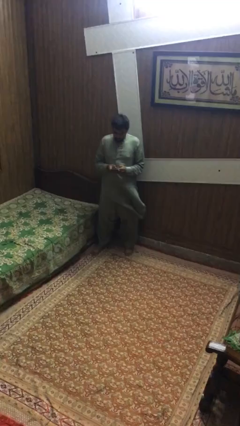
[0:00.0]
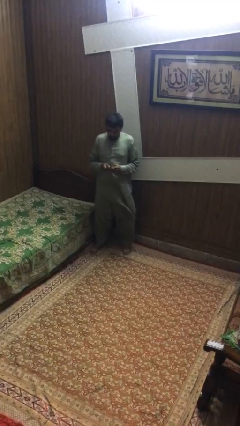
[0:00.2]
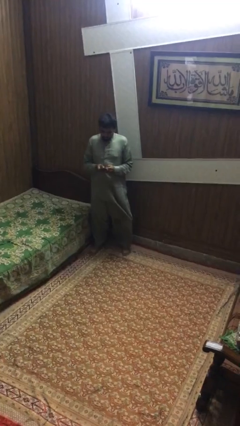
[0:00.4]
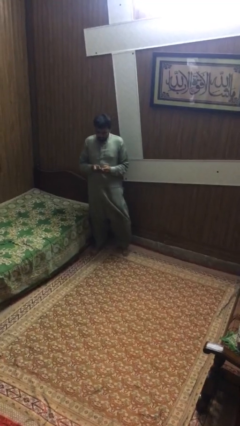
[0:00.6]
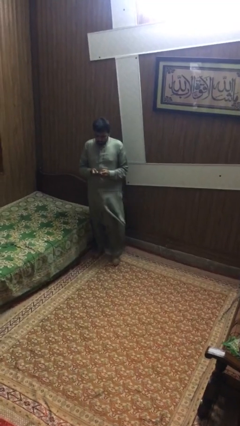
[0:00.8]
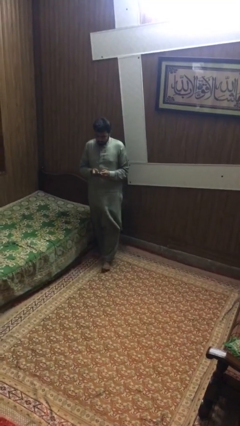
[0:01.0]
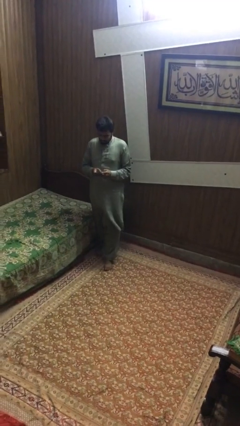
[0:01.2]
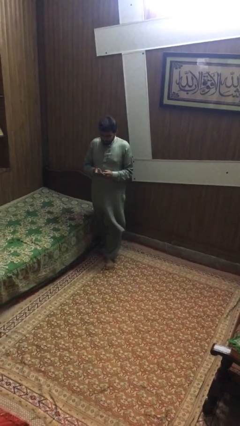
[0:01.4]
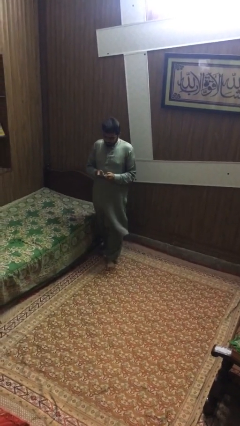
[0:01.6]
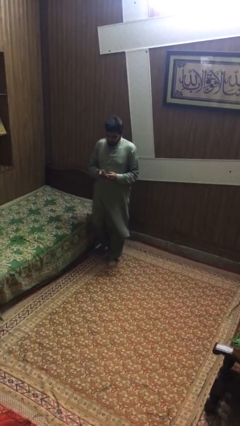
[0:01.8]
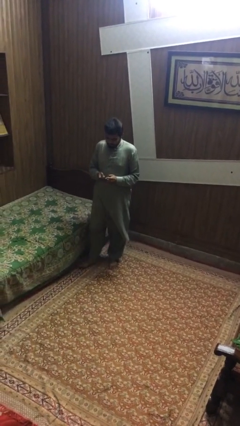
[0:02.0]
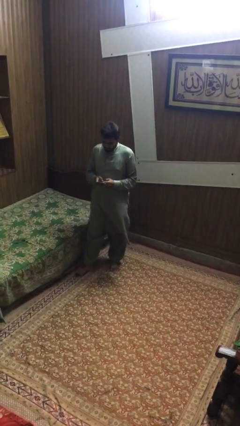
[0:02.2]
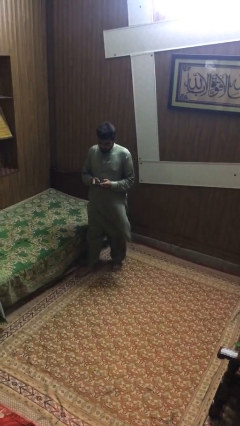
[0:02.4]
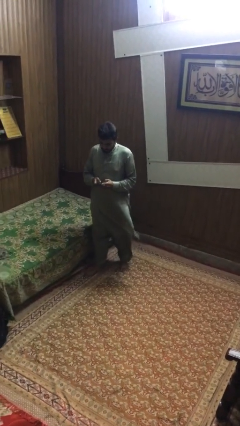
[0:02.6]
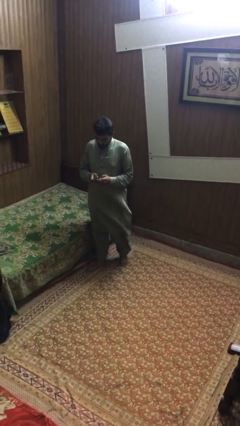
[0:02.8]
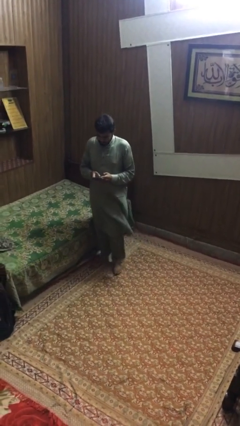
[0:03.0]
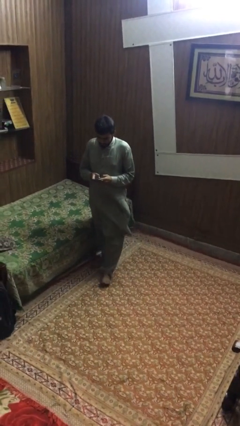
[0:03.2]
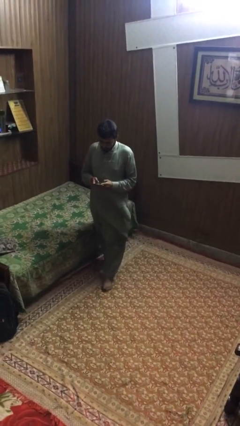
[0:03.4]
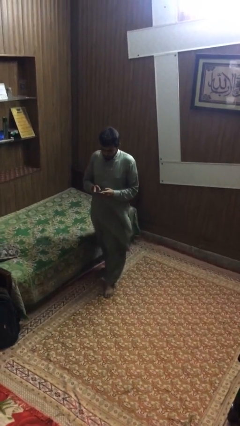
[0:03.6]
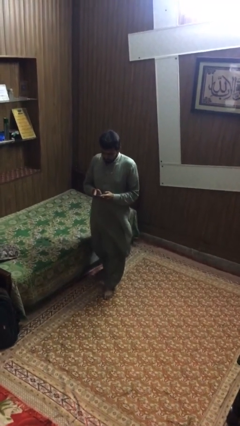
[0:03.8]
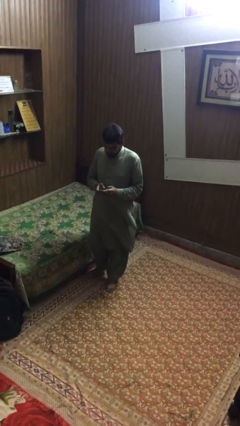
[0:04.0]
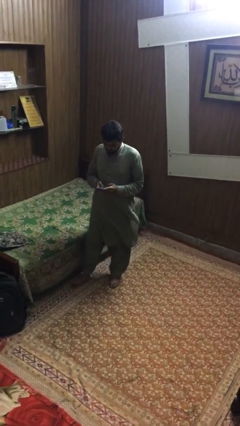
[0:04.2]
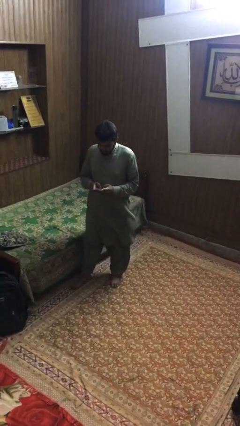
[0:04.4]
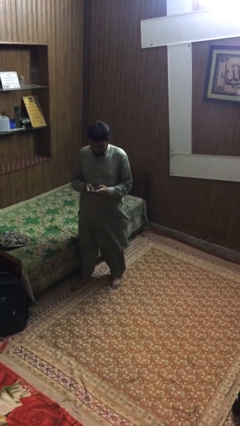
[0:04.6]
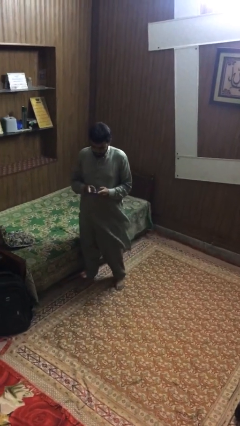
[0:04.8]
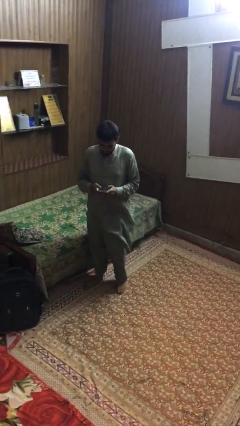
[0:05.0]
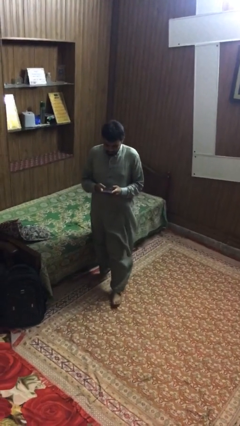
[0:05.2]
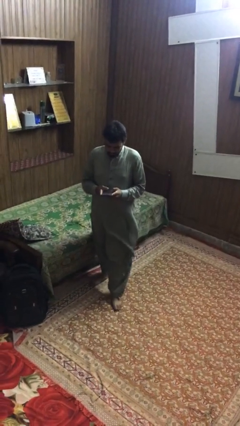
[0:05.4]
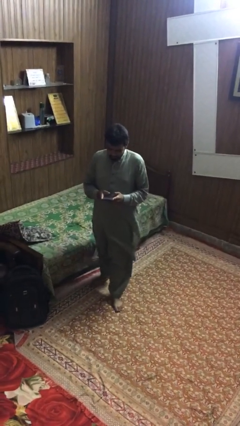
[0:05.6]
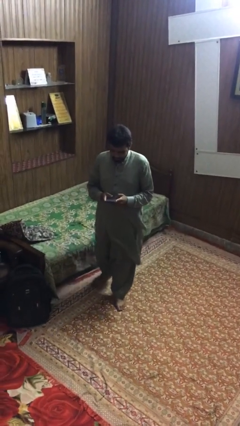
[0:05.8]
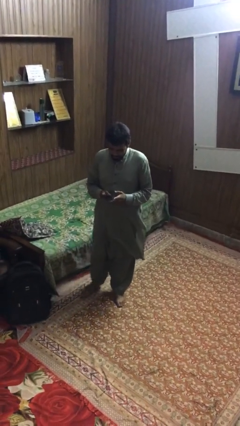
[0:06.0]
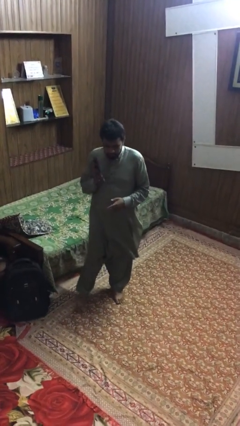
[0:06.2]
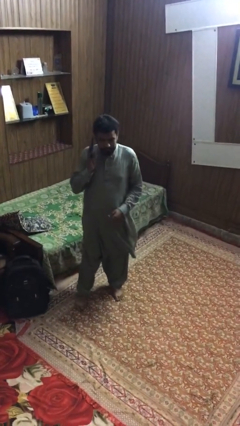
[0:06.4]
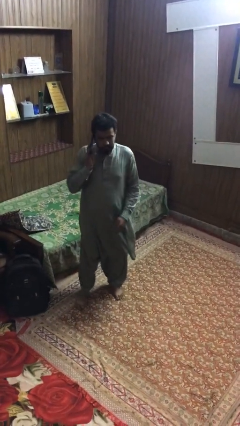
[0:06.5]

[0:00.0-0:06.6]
person texts on phone

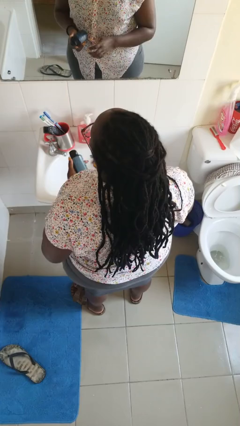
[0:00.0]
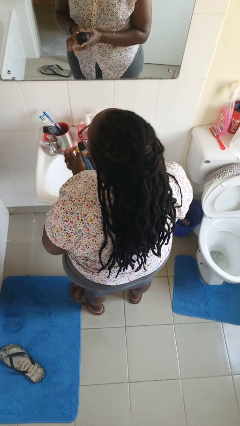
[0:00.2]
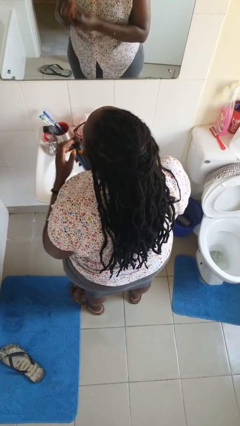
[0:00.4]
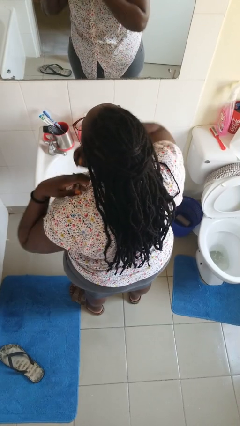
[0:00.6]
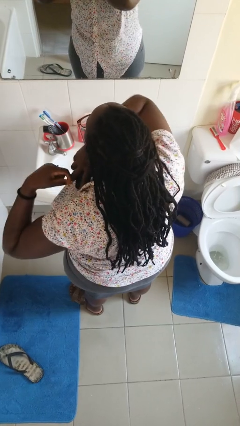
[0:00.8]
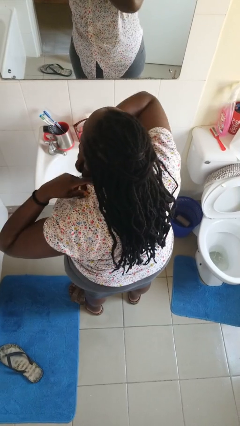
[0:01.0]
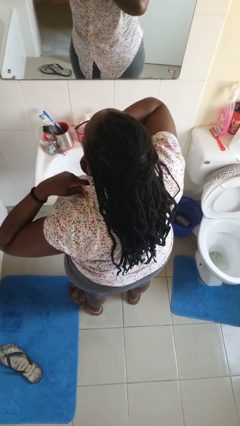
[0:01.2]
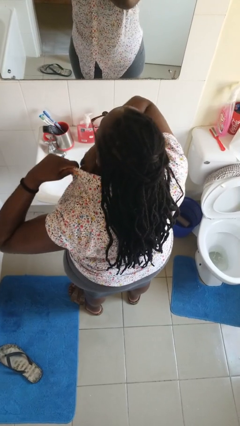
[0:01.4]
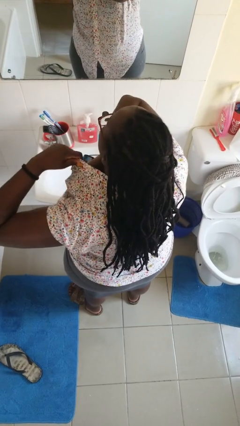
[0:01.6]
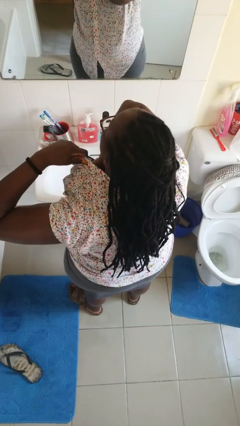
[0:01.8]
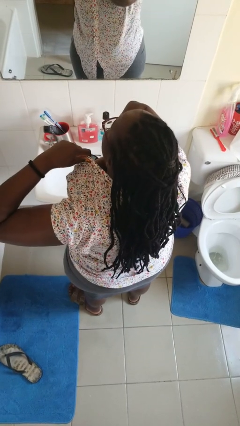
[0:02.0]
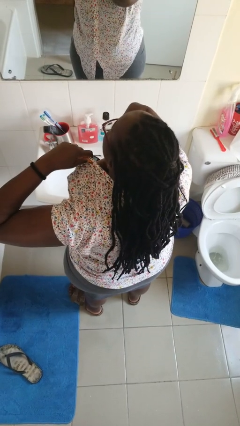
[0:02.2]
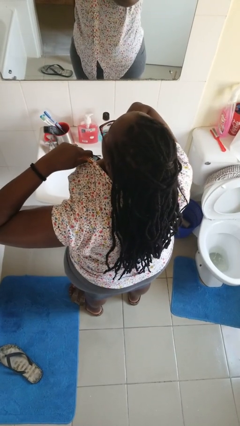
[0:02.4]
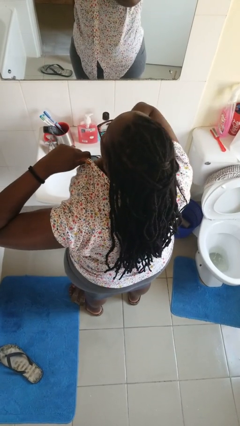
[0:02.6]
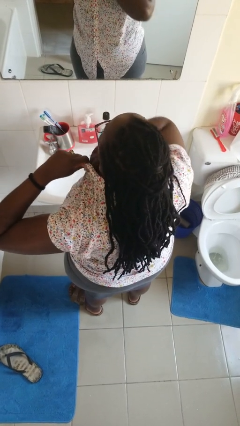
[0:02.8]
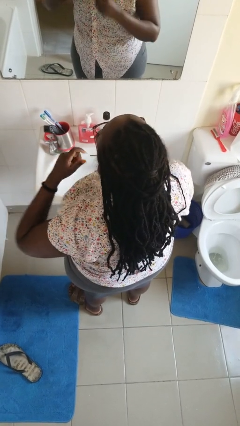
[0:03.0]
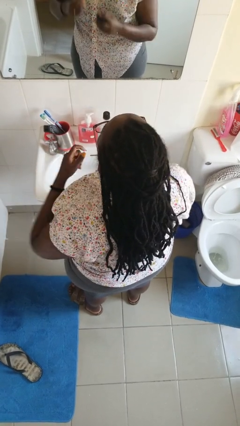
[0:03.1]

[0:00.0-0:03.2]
person applies deodorant

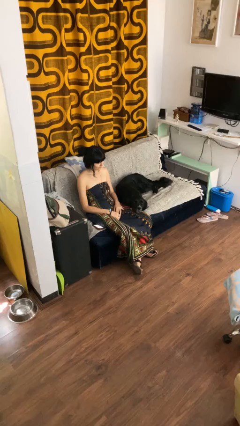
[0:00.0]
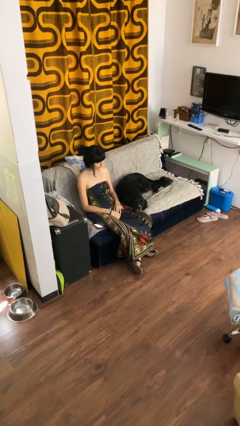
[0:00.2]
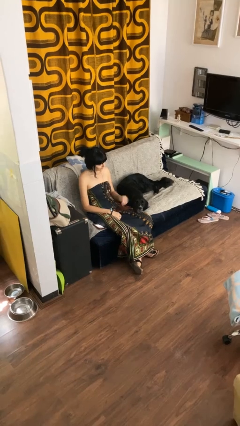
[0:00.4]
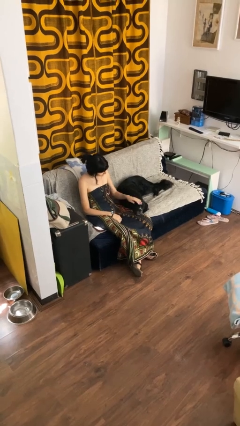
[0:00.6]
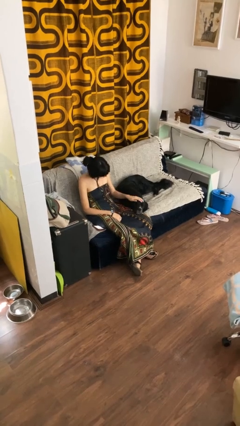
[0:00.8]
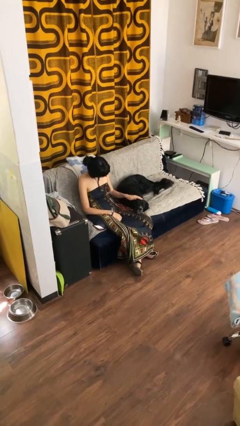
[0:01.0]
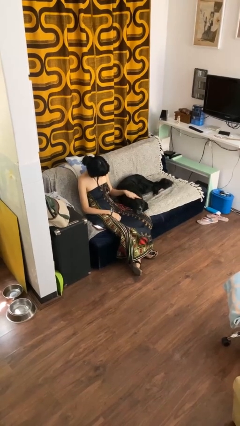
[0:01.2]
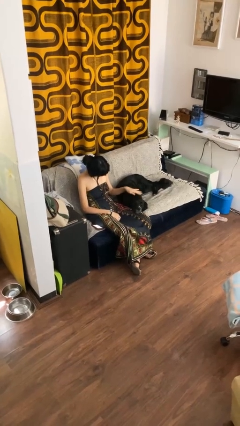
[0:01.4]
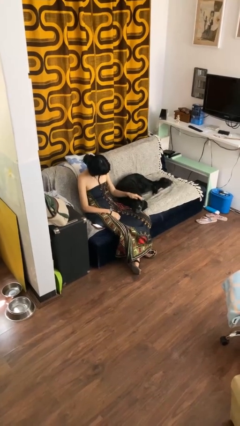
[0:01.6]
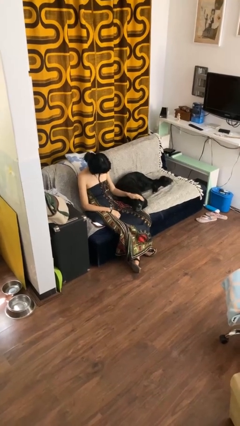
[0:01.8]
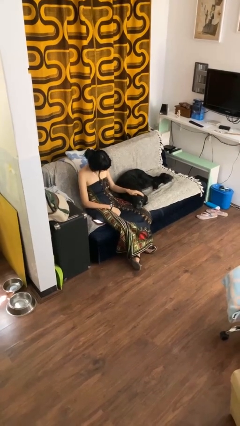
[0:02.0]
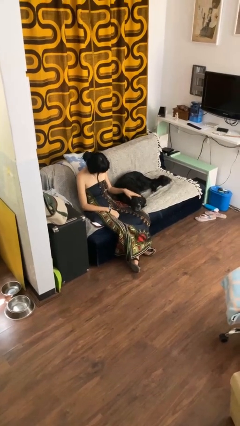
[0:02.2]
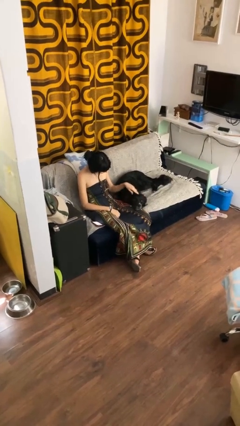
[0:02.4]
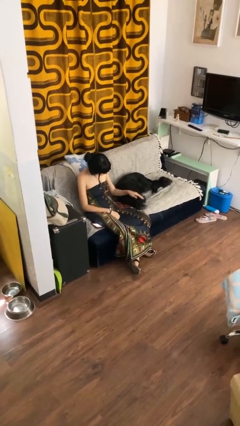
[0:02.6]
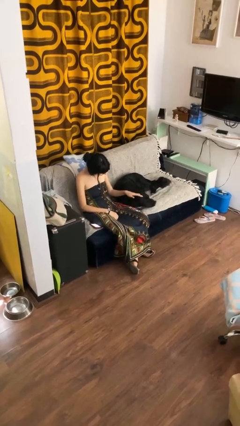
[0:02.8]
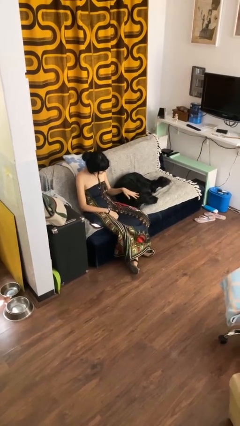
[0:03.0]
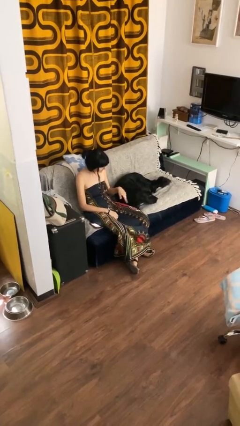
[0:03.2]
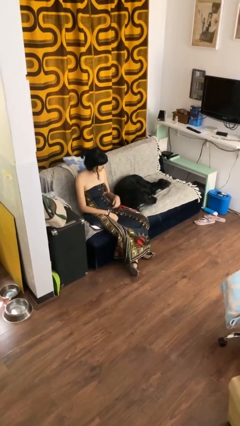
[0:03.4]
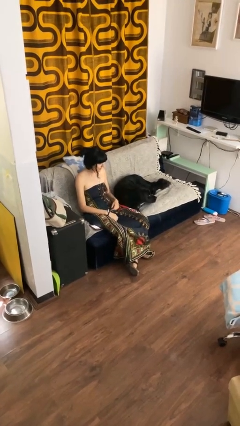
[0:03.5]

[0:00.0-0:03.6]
person pets dog

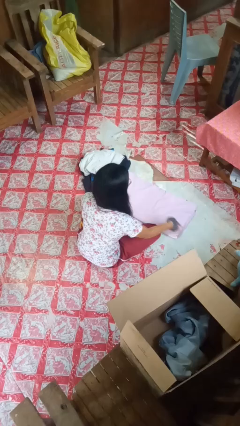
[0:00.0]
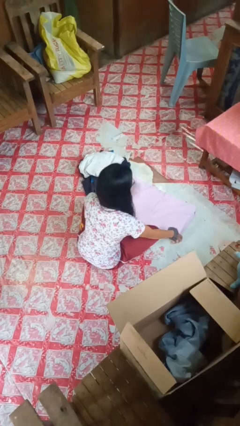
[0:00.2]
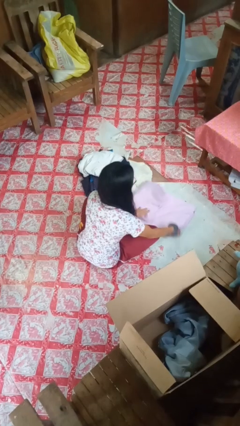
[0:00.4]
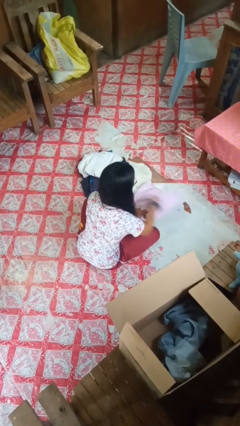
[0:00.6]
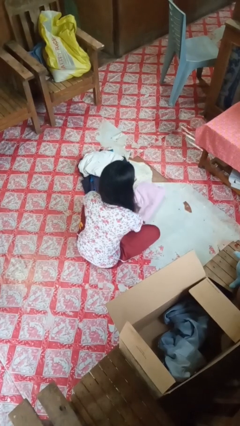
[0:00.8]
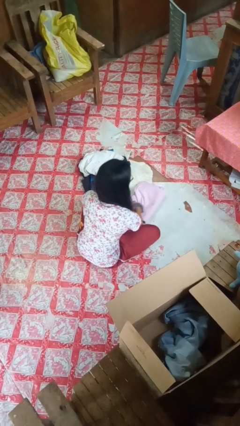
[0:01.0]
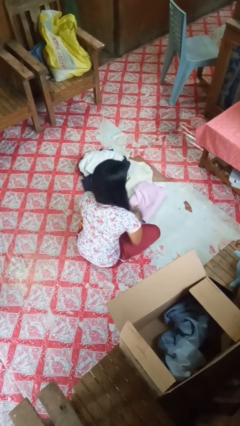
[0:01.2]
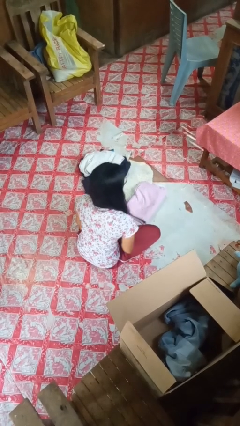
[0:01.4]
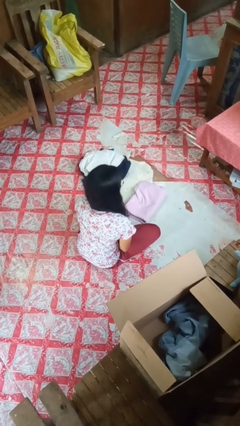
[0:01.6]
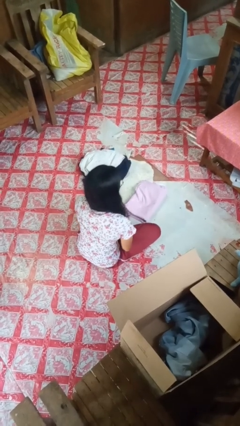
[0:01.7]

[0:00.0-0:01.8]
person folds towel

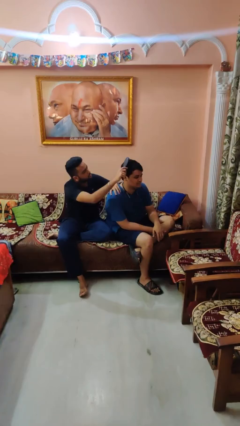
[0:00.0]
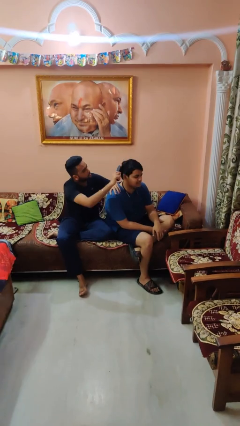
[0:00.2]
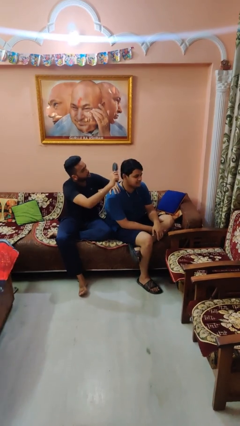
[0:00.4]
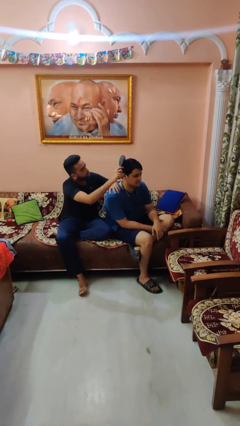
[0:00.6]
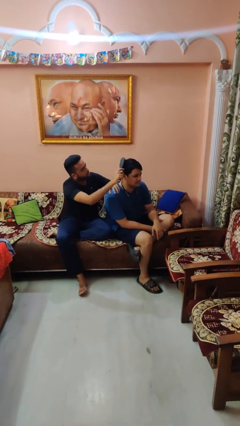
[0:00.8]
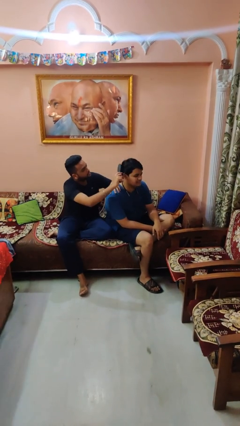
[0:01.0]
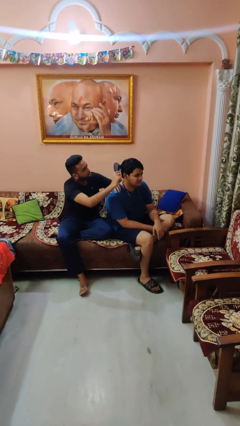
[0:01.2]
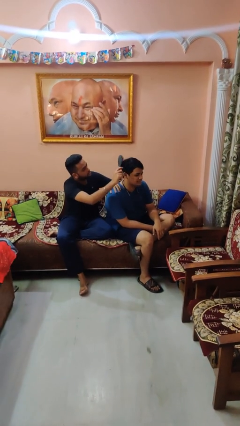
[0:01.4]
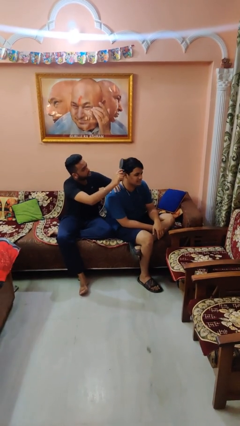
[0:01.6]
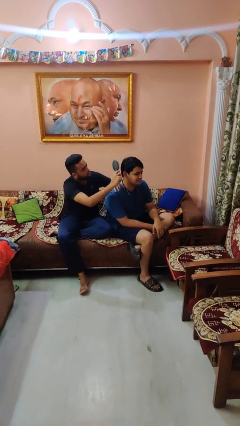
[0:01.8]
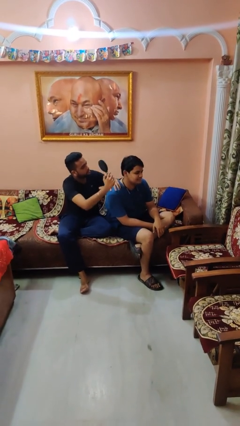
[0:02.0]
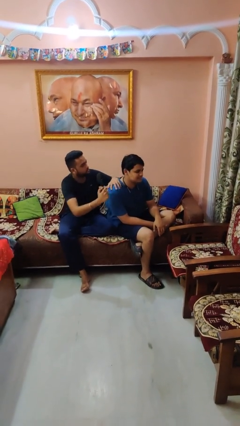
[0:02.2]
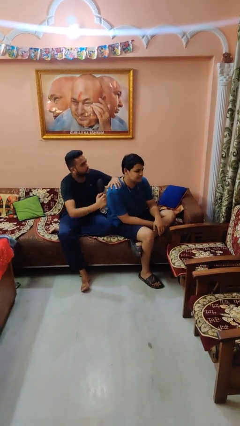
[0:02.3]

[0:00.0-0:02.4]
person brushes hair of person
